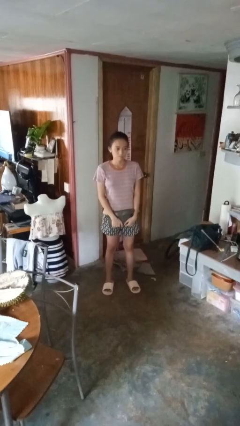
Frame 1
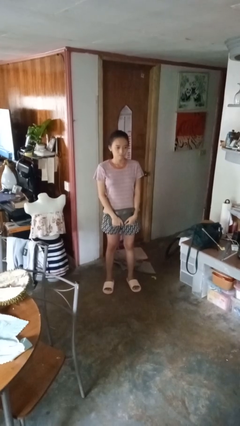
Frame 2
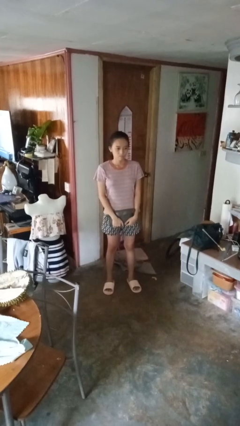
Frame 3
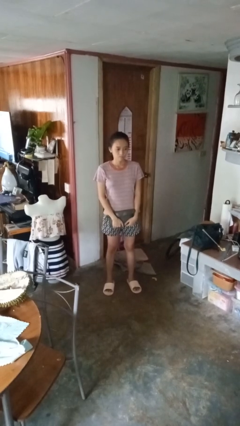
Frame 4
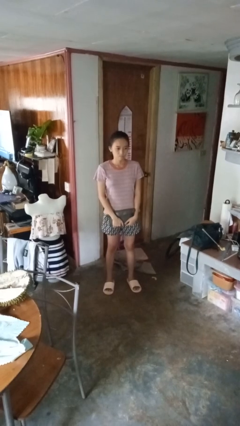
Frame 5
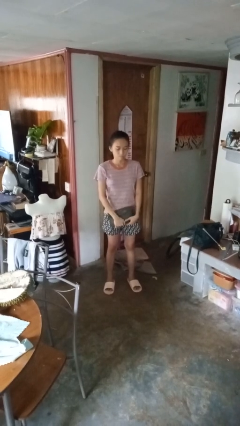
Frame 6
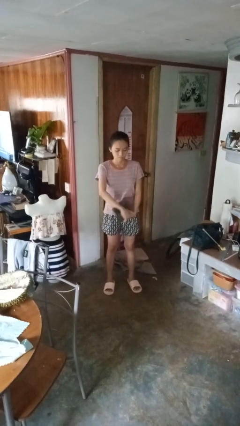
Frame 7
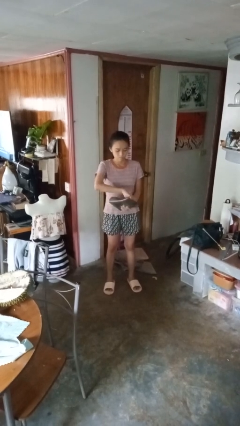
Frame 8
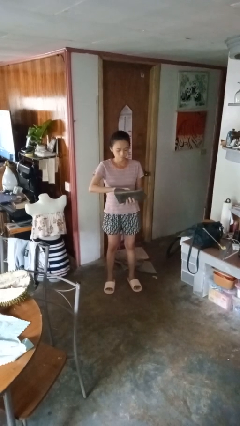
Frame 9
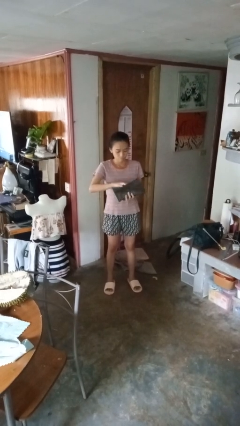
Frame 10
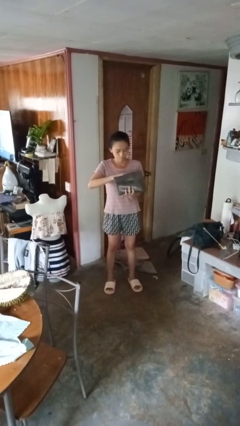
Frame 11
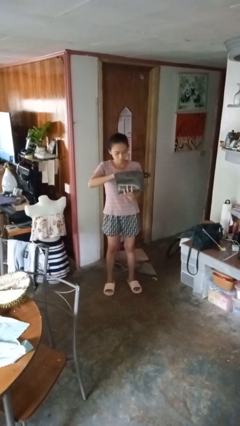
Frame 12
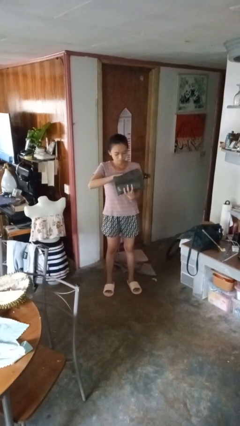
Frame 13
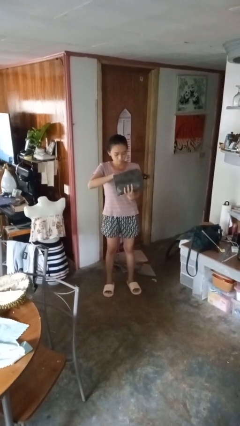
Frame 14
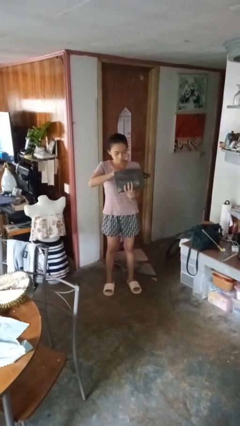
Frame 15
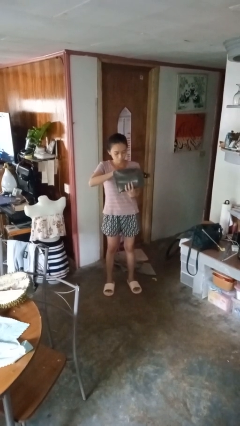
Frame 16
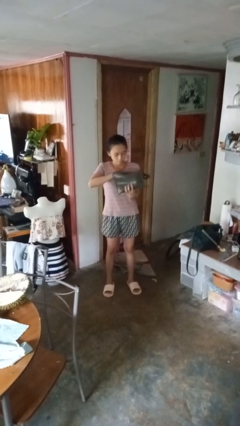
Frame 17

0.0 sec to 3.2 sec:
person searches in purse

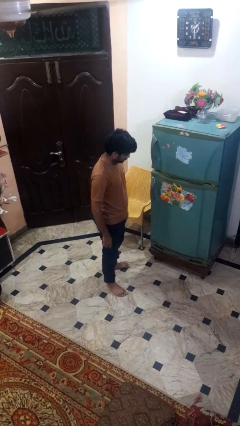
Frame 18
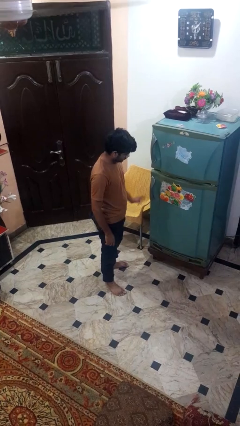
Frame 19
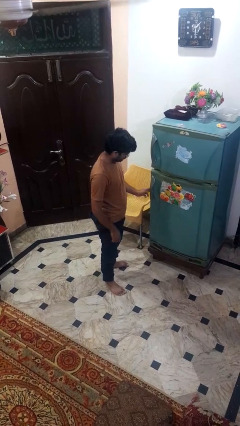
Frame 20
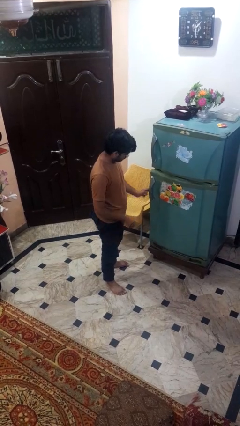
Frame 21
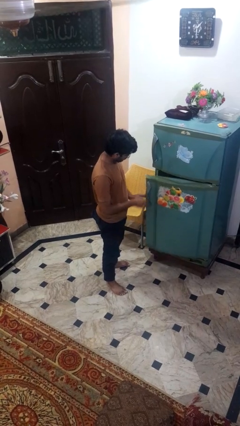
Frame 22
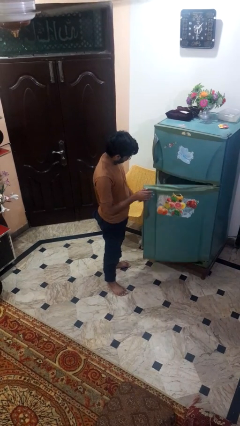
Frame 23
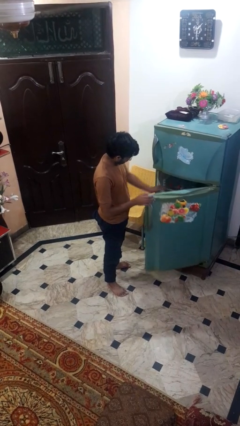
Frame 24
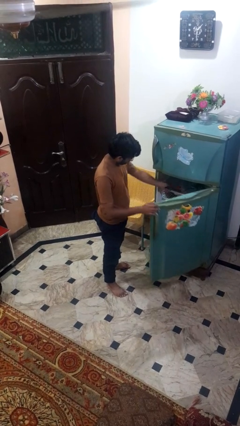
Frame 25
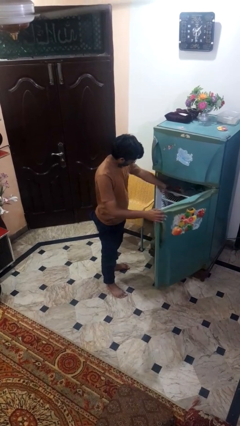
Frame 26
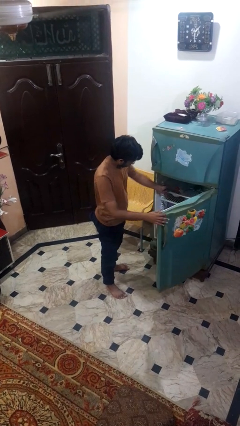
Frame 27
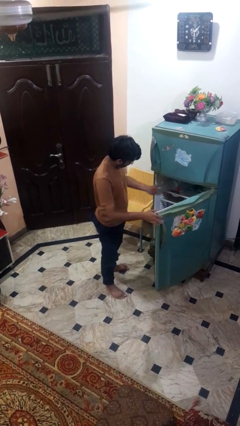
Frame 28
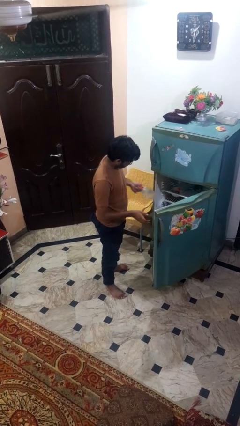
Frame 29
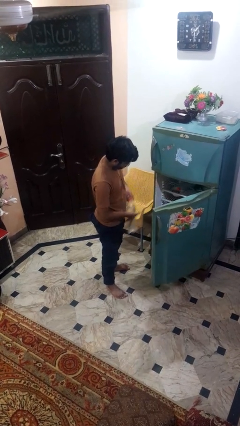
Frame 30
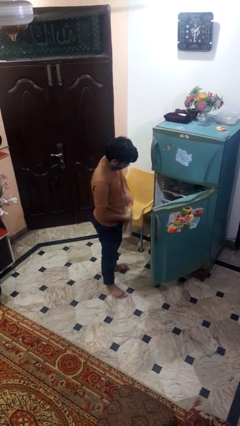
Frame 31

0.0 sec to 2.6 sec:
person takes object from refrigerator

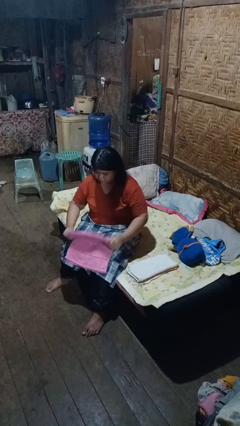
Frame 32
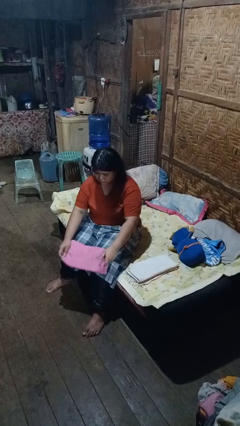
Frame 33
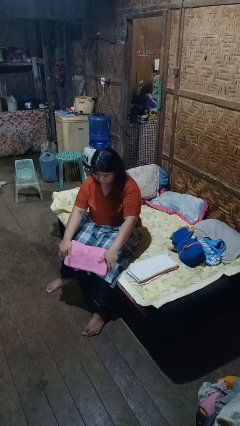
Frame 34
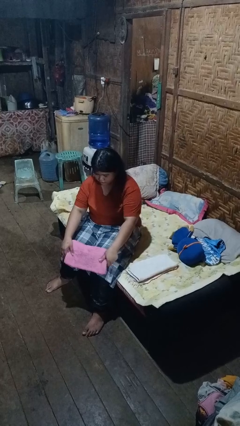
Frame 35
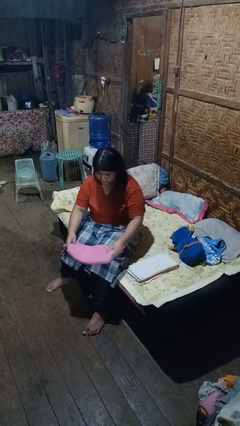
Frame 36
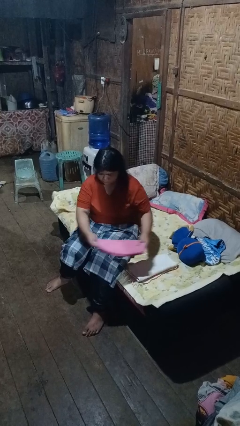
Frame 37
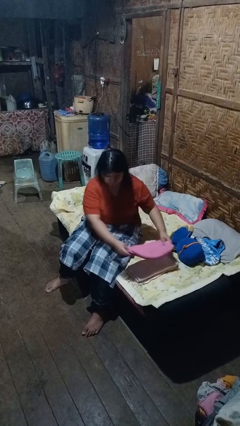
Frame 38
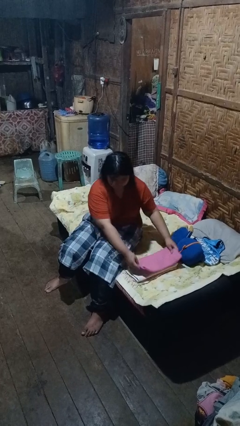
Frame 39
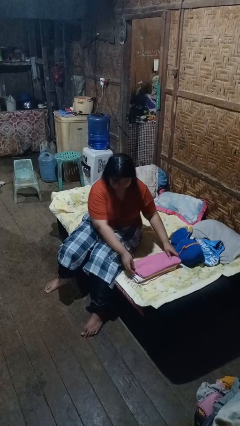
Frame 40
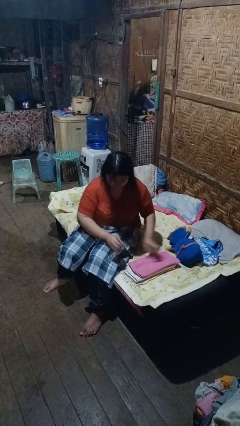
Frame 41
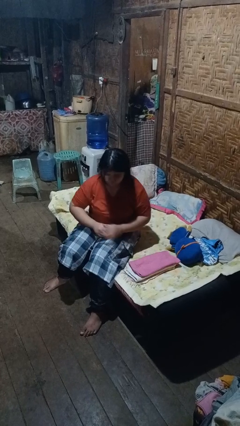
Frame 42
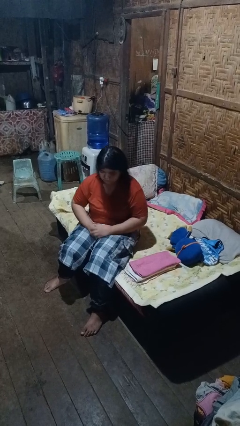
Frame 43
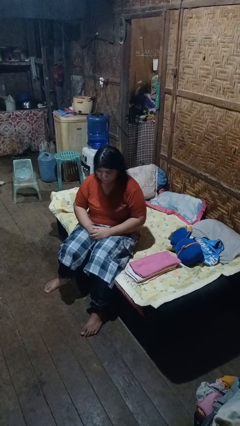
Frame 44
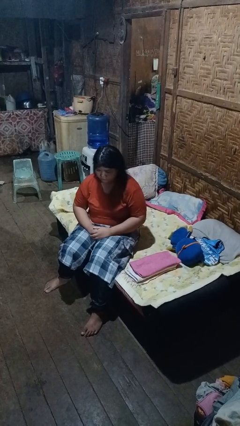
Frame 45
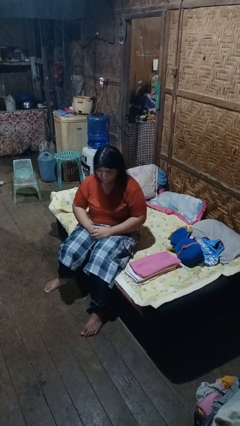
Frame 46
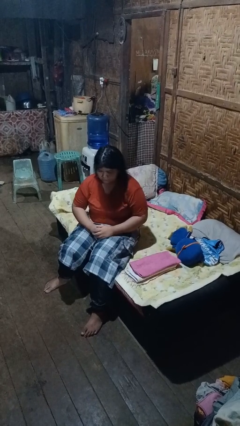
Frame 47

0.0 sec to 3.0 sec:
person folds towel

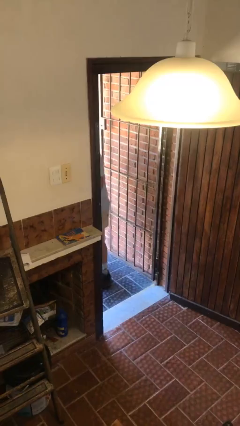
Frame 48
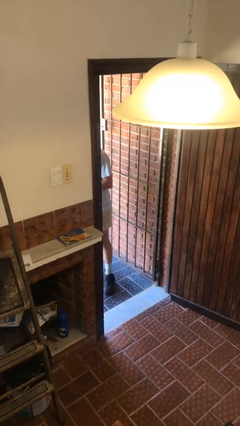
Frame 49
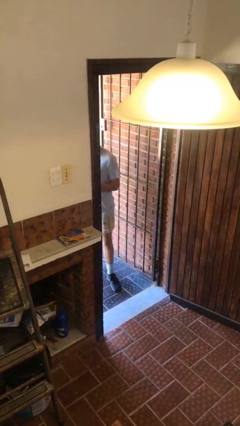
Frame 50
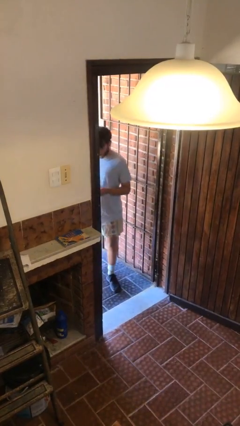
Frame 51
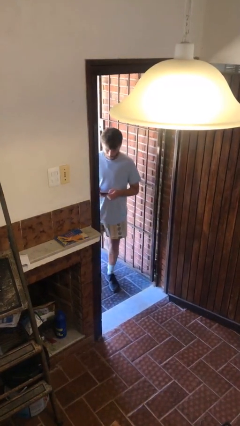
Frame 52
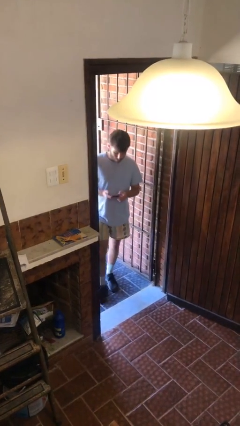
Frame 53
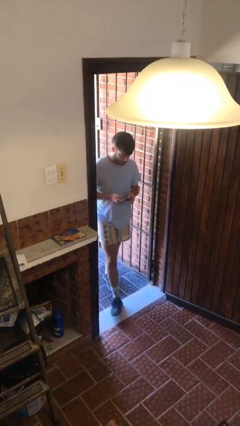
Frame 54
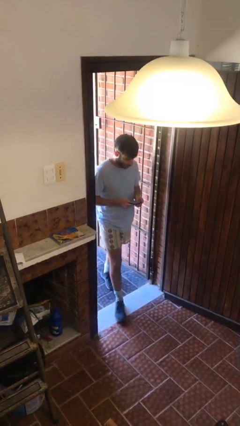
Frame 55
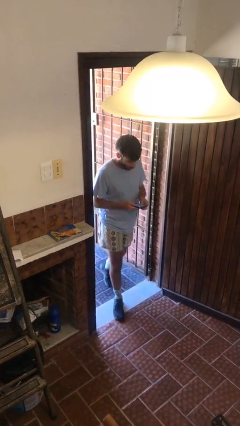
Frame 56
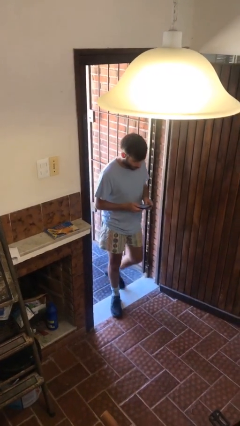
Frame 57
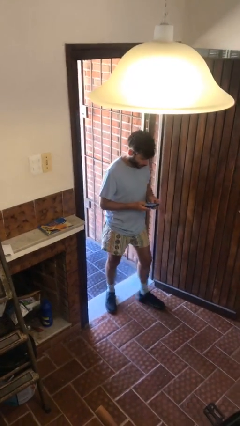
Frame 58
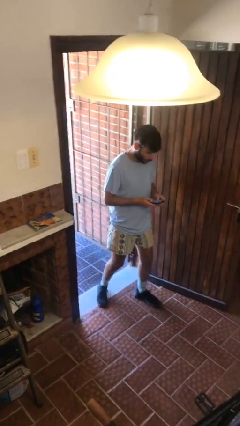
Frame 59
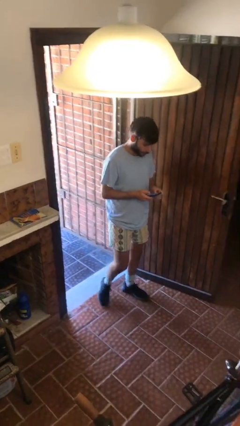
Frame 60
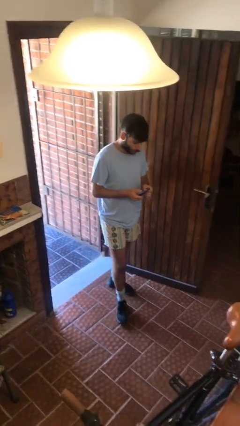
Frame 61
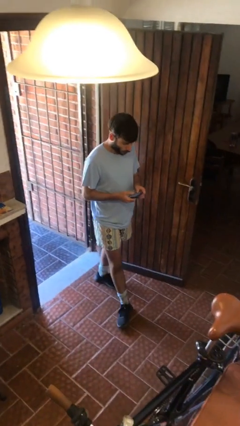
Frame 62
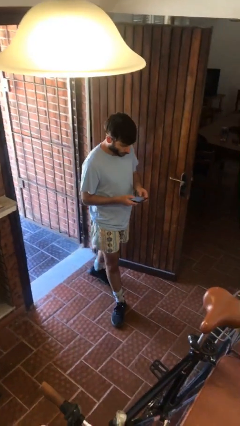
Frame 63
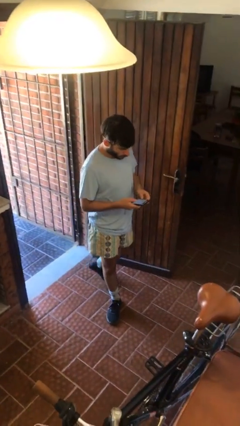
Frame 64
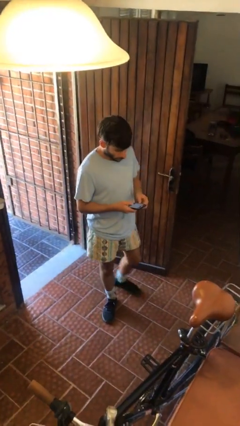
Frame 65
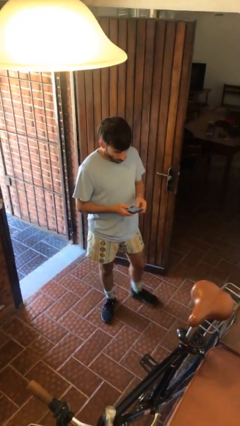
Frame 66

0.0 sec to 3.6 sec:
person enters scene through structure

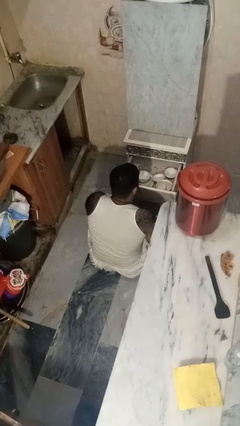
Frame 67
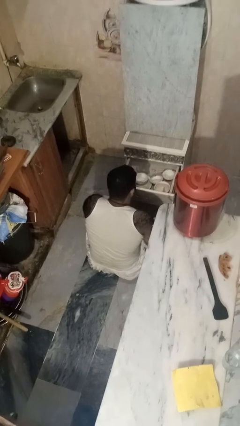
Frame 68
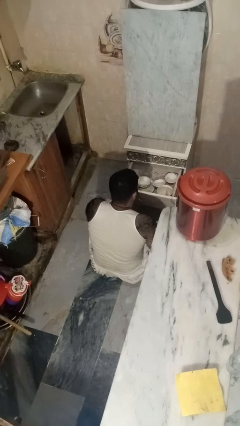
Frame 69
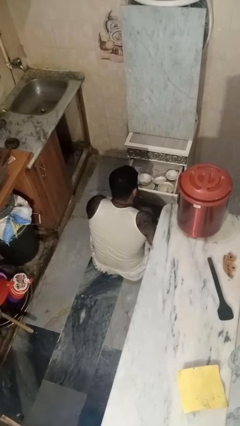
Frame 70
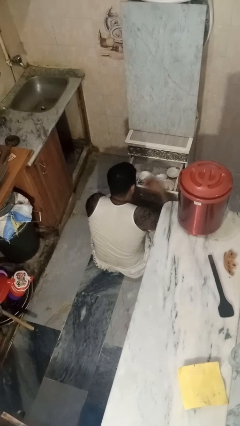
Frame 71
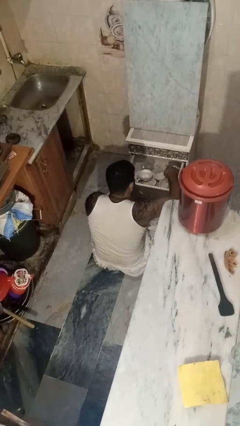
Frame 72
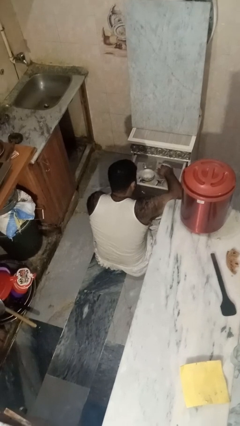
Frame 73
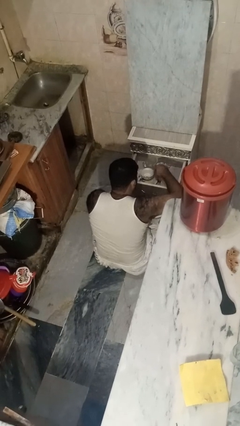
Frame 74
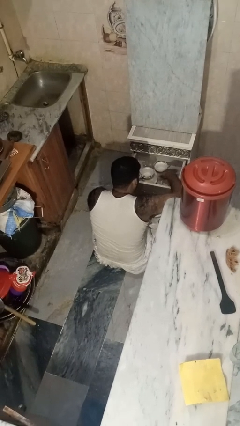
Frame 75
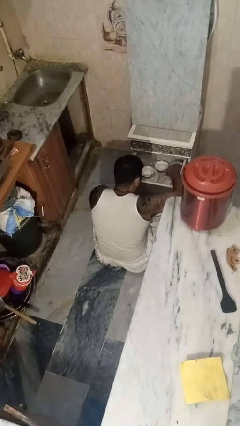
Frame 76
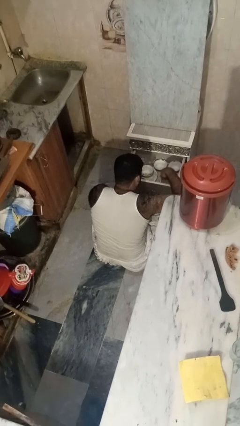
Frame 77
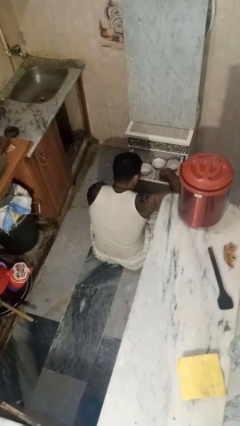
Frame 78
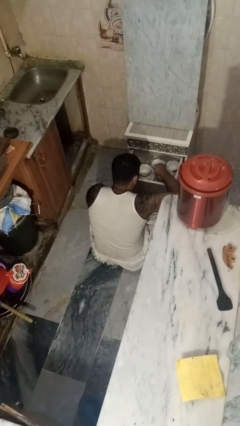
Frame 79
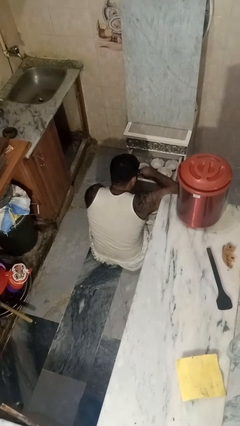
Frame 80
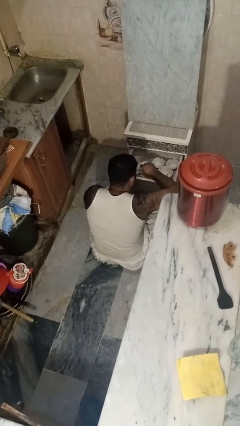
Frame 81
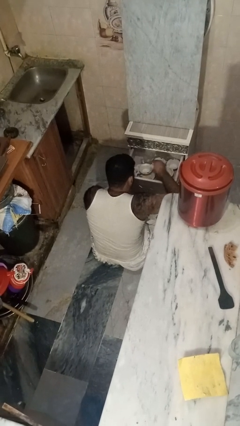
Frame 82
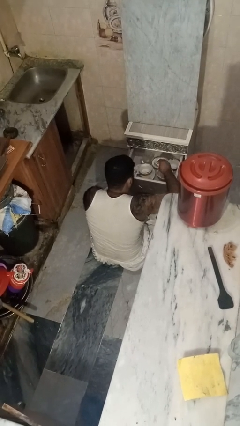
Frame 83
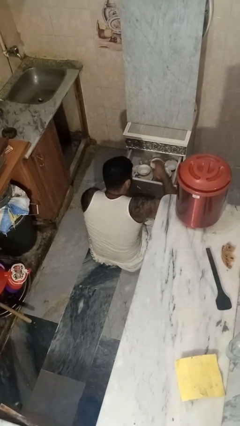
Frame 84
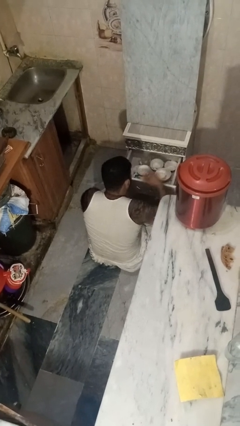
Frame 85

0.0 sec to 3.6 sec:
person searches in kitchen drawer

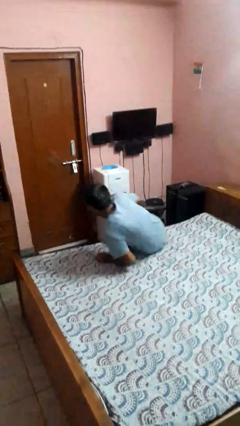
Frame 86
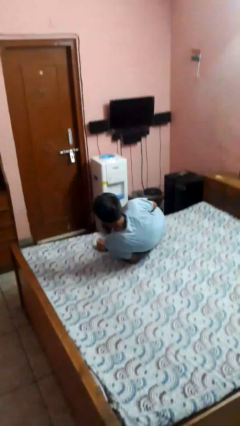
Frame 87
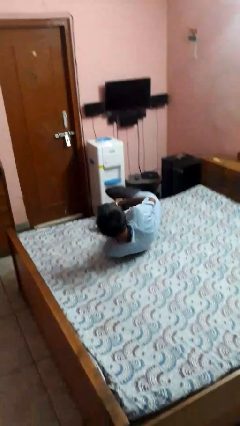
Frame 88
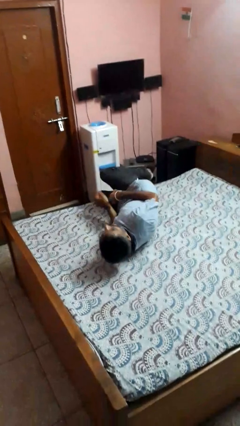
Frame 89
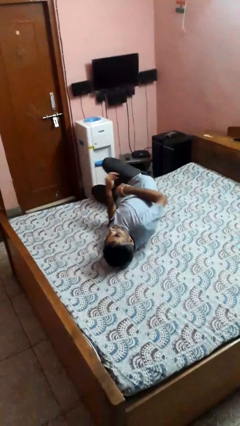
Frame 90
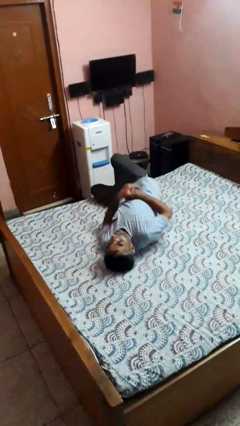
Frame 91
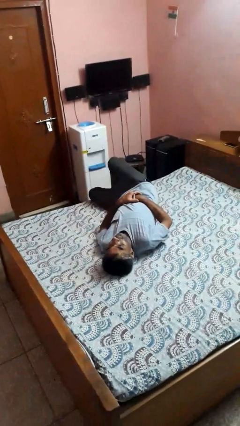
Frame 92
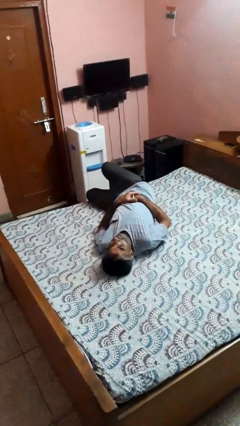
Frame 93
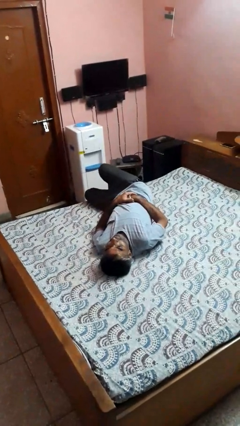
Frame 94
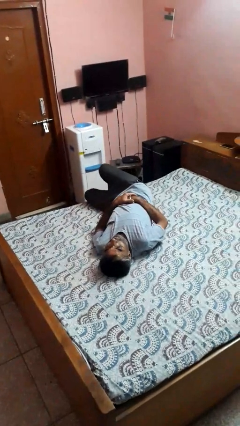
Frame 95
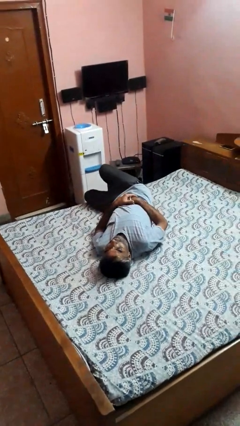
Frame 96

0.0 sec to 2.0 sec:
person lies down on bed
